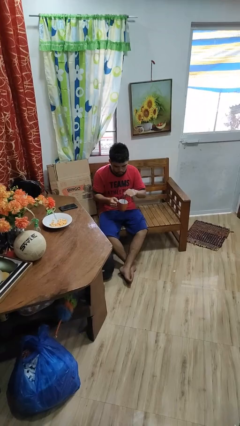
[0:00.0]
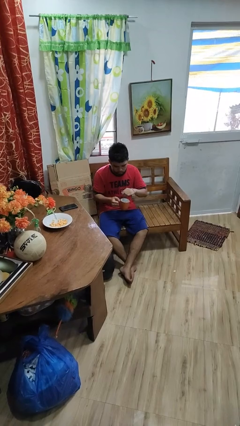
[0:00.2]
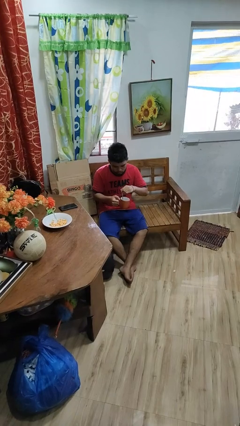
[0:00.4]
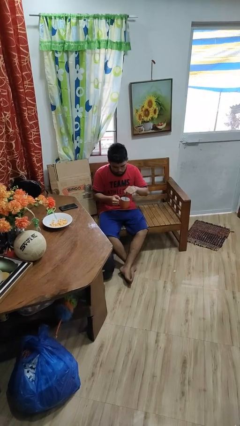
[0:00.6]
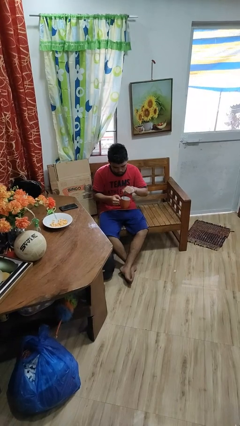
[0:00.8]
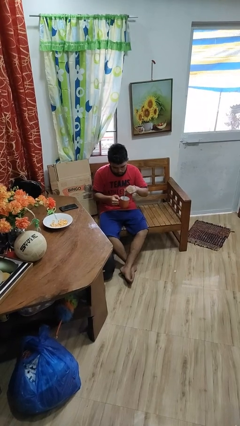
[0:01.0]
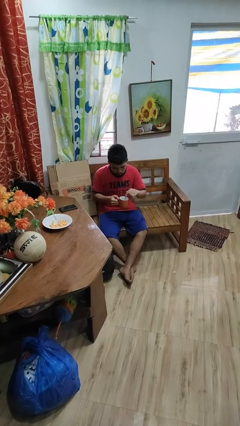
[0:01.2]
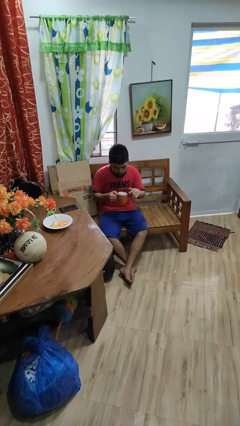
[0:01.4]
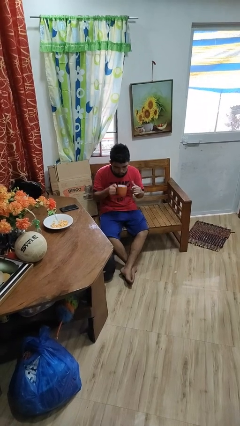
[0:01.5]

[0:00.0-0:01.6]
person stirs mug

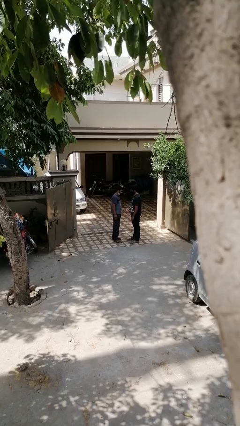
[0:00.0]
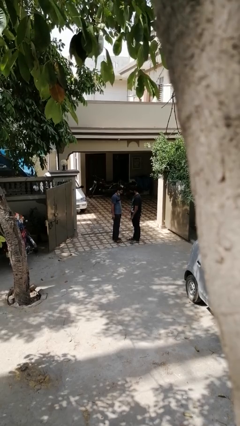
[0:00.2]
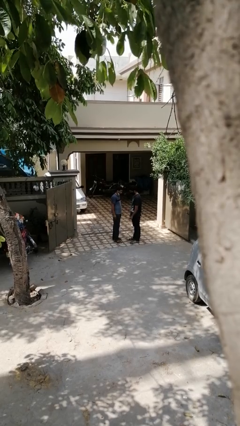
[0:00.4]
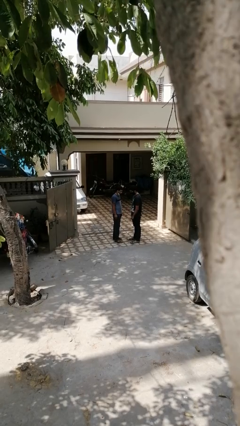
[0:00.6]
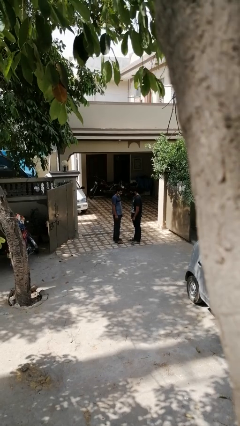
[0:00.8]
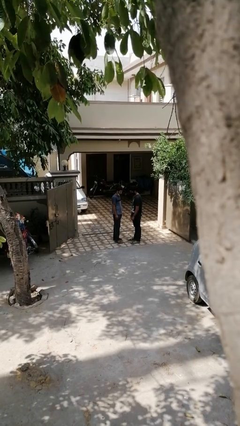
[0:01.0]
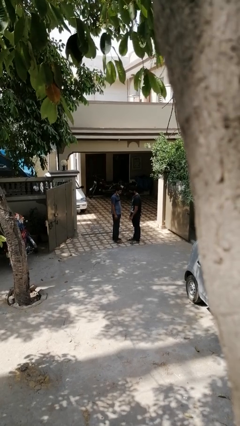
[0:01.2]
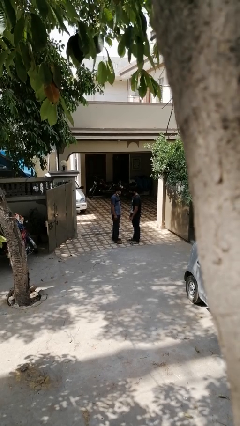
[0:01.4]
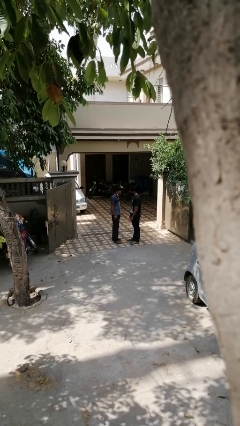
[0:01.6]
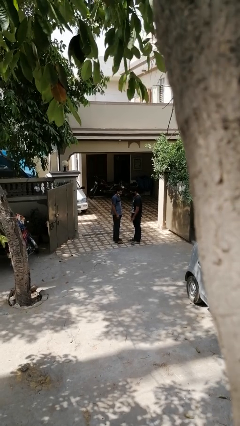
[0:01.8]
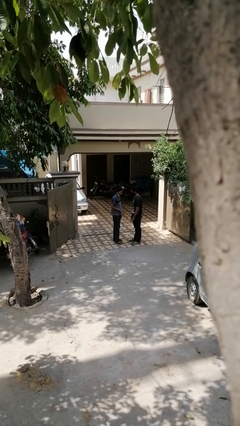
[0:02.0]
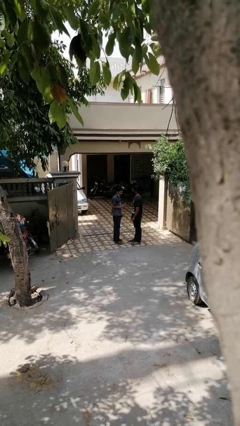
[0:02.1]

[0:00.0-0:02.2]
person highfives hand

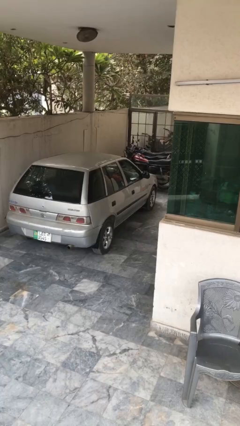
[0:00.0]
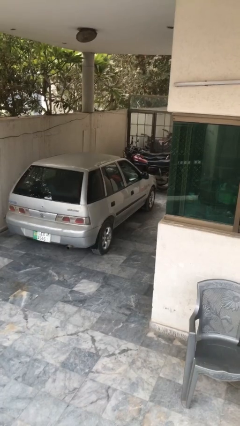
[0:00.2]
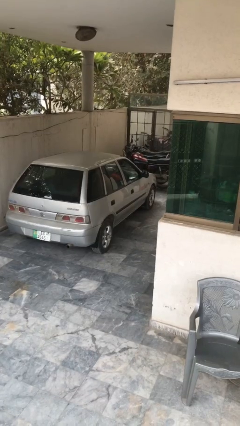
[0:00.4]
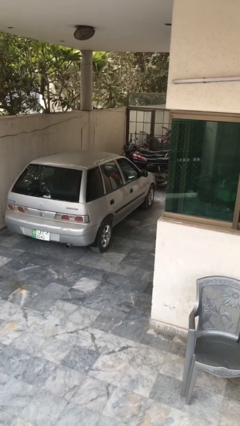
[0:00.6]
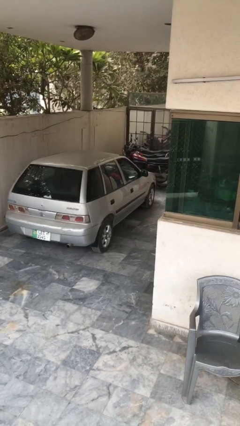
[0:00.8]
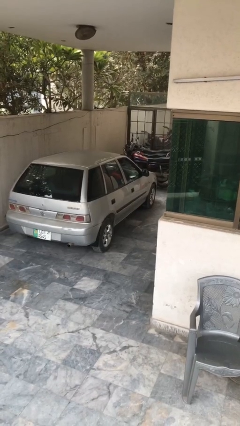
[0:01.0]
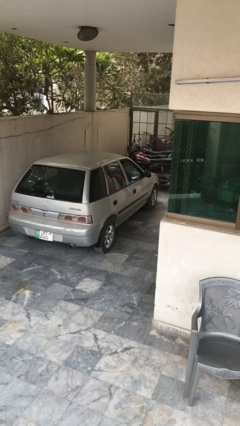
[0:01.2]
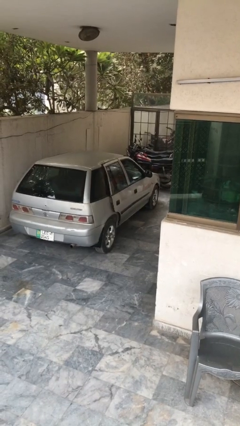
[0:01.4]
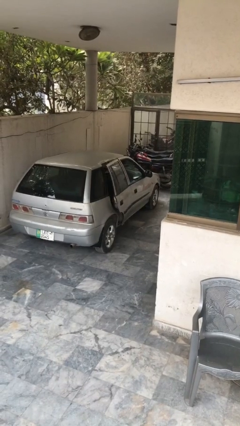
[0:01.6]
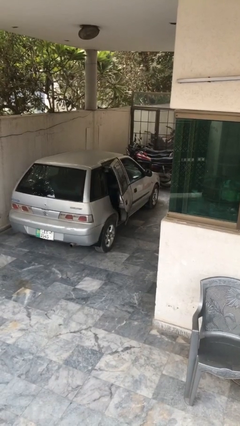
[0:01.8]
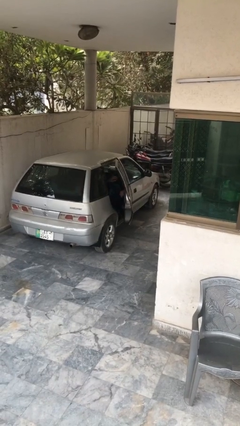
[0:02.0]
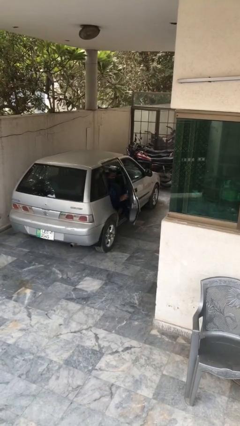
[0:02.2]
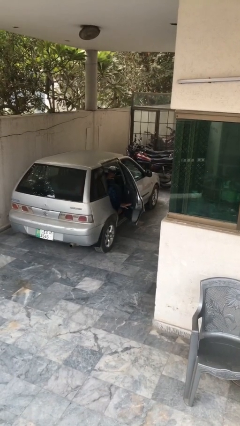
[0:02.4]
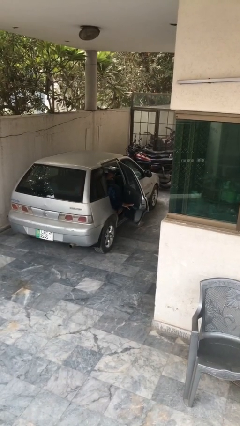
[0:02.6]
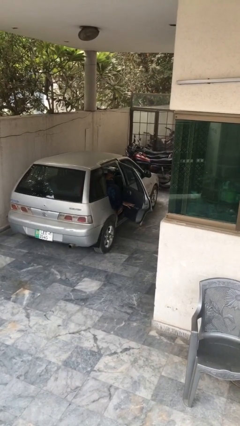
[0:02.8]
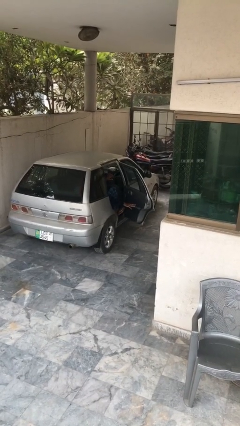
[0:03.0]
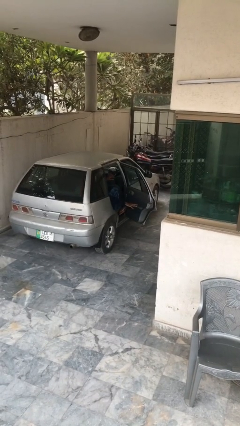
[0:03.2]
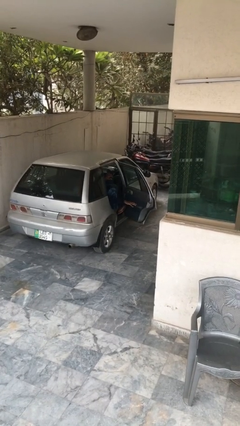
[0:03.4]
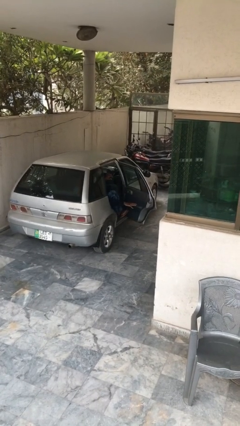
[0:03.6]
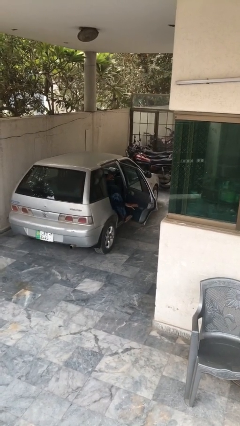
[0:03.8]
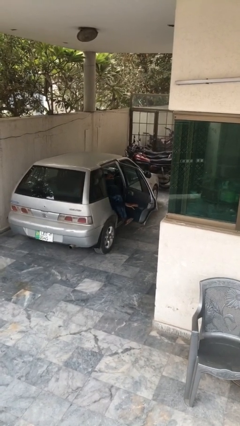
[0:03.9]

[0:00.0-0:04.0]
person opens car door

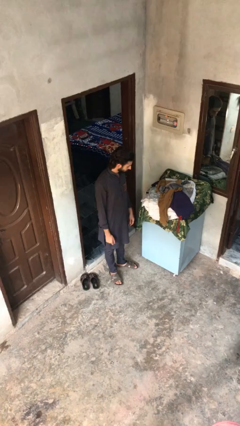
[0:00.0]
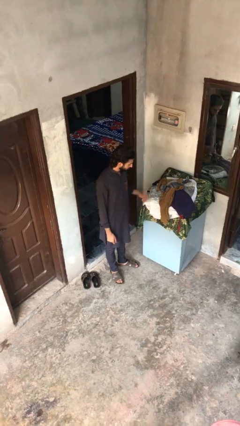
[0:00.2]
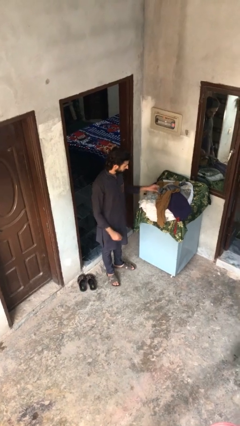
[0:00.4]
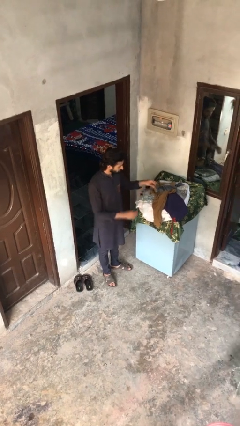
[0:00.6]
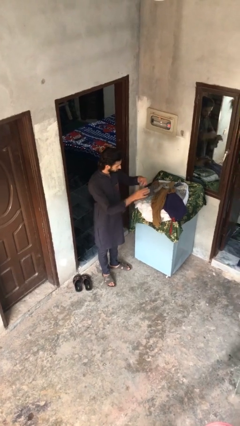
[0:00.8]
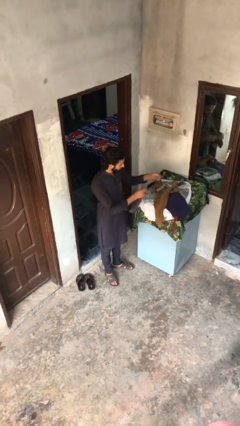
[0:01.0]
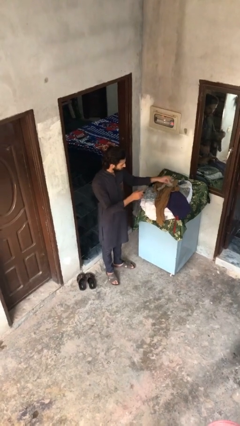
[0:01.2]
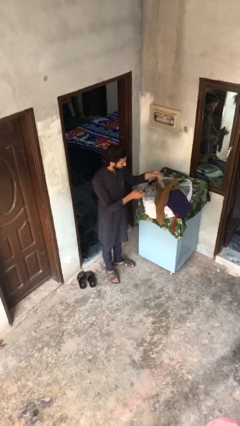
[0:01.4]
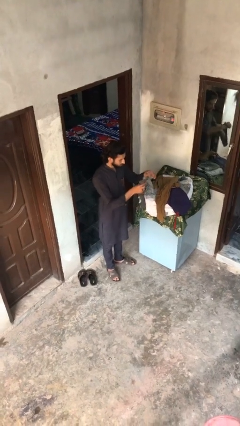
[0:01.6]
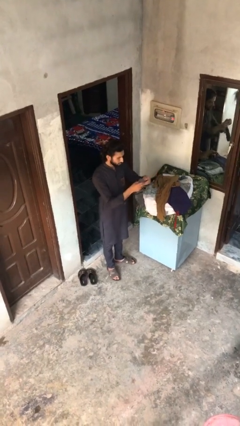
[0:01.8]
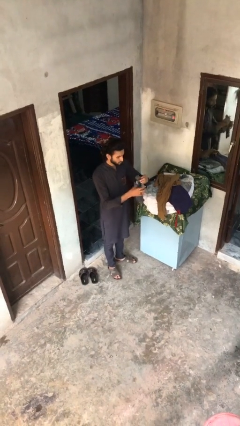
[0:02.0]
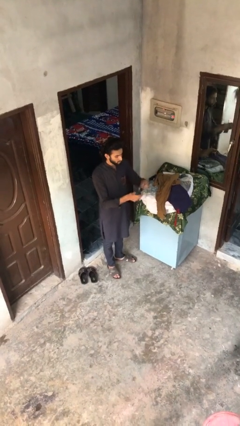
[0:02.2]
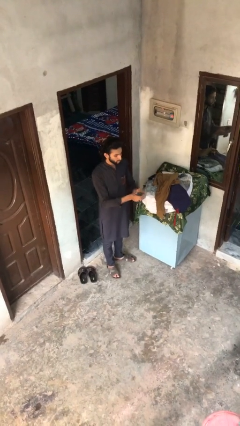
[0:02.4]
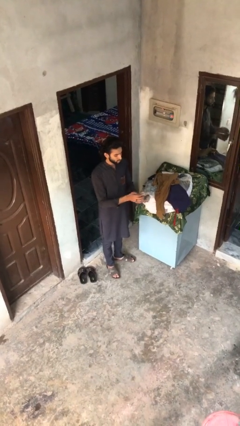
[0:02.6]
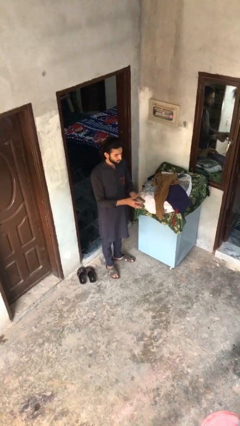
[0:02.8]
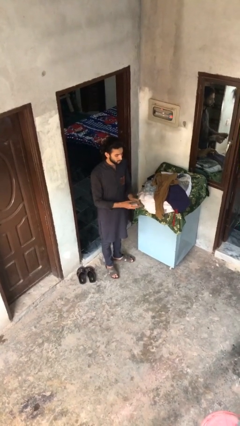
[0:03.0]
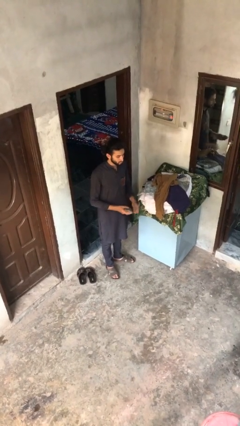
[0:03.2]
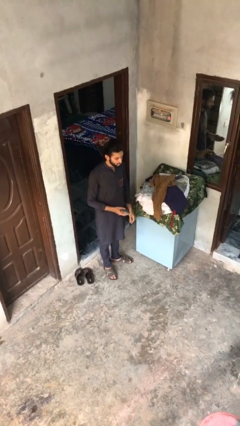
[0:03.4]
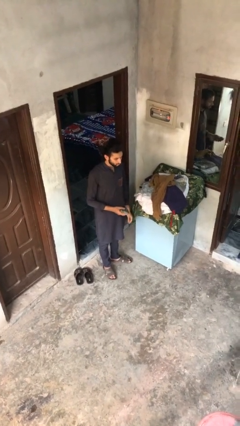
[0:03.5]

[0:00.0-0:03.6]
person folds socks

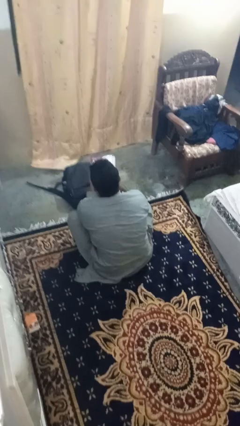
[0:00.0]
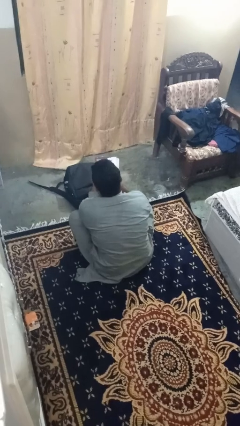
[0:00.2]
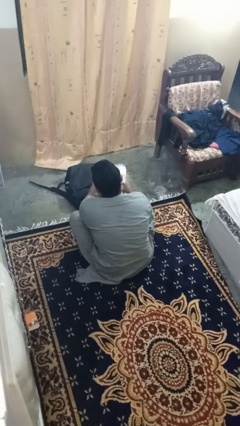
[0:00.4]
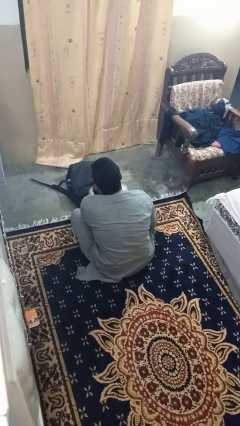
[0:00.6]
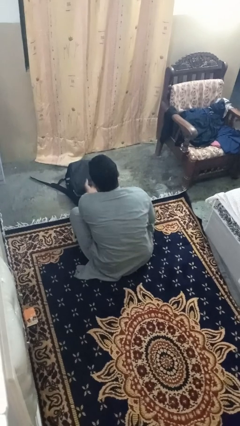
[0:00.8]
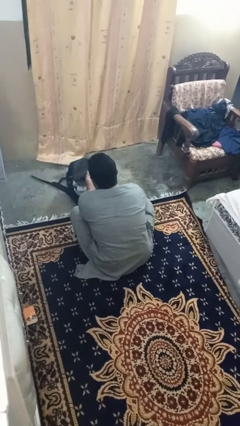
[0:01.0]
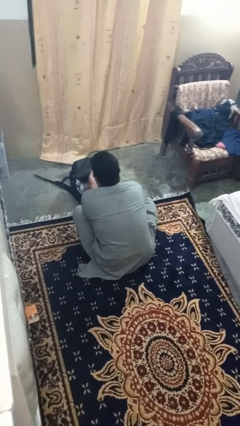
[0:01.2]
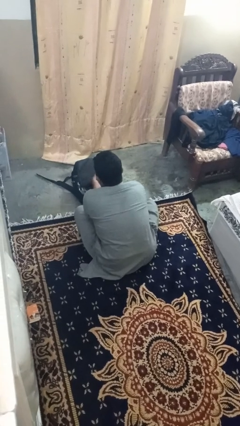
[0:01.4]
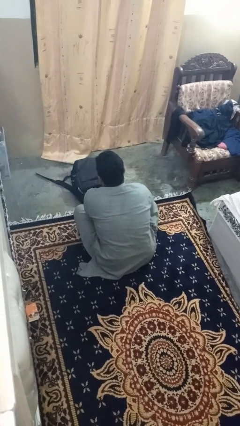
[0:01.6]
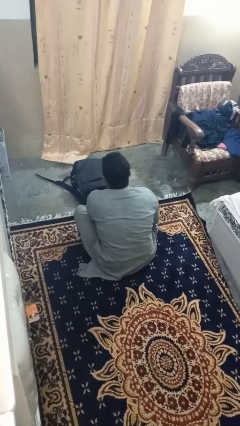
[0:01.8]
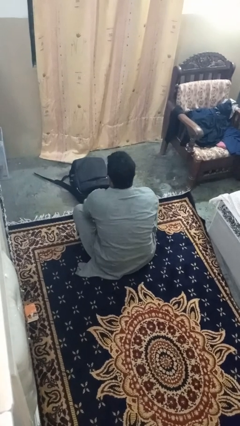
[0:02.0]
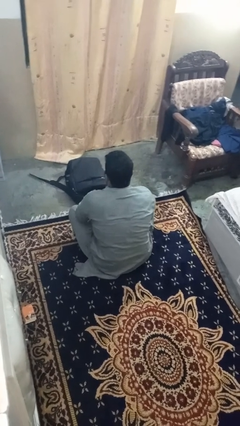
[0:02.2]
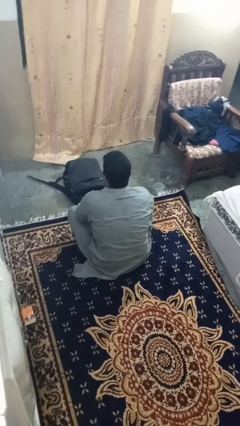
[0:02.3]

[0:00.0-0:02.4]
person puts object into bag

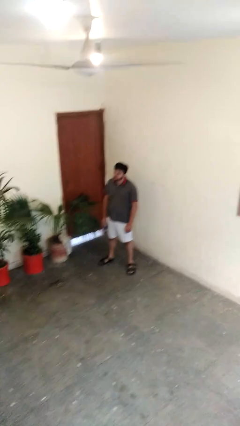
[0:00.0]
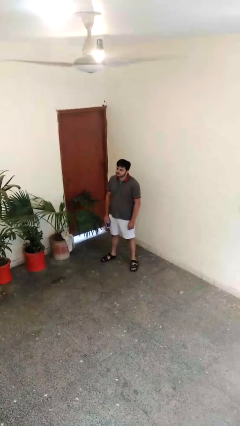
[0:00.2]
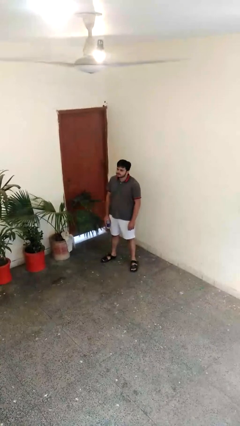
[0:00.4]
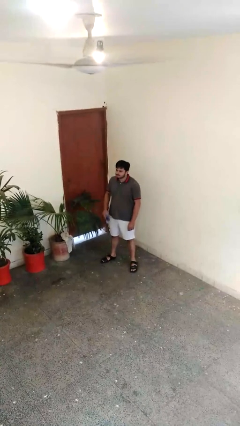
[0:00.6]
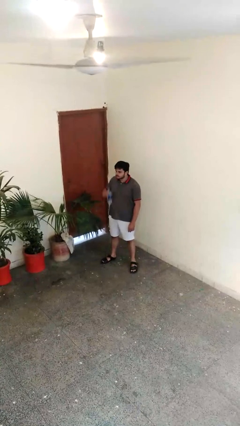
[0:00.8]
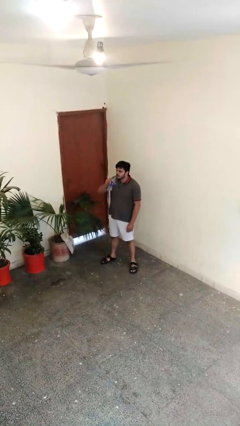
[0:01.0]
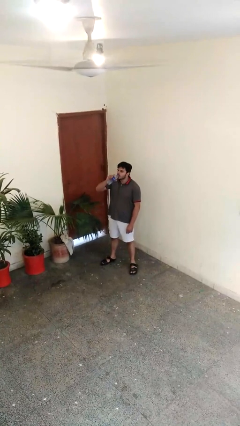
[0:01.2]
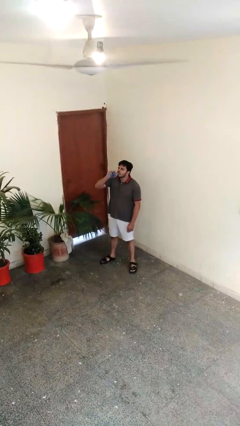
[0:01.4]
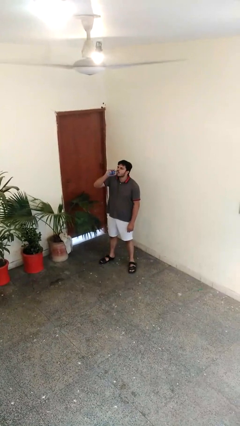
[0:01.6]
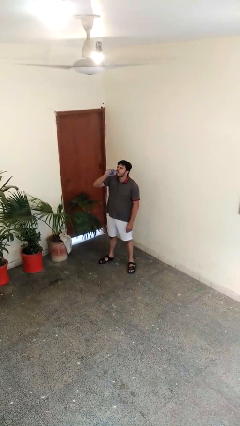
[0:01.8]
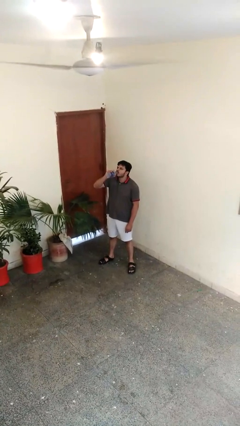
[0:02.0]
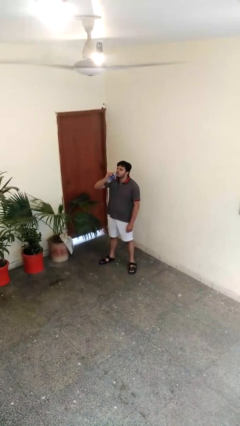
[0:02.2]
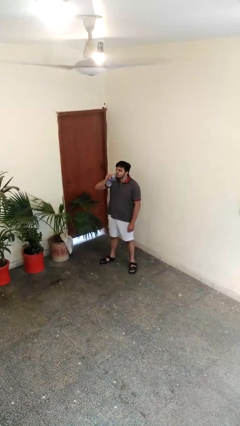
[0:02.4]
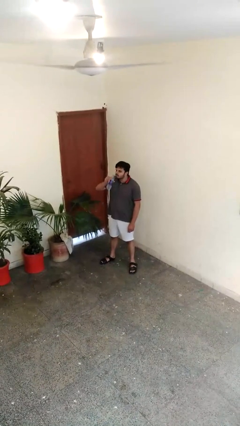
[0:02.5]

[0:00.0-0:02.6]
person drinks from bottle

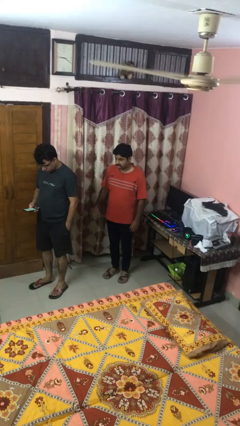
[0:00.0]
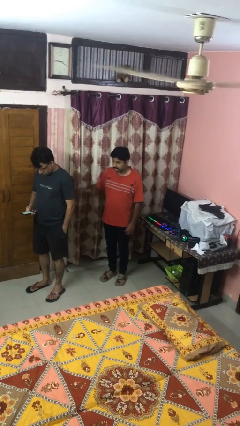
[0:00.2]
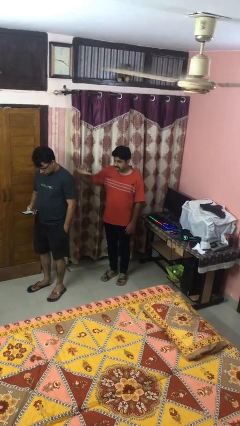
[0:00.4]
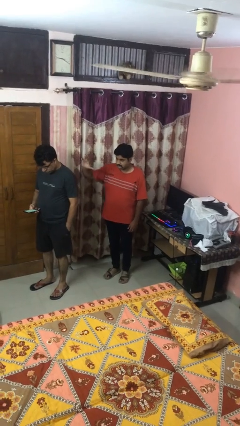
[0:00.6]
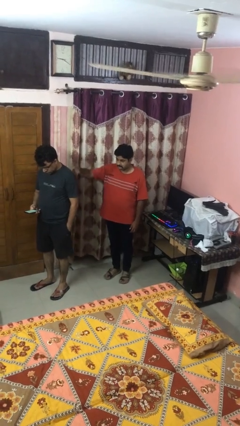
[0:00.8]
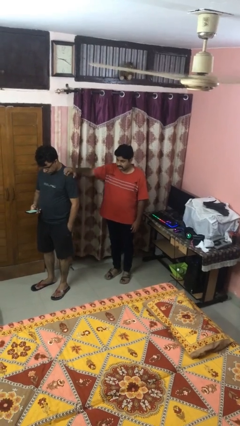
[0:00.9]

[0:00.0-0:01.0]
person grabs person by shoulder
